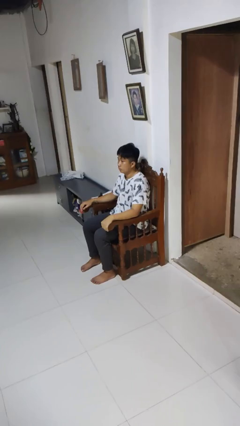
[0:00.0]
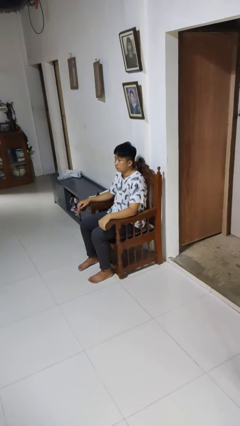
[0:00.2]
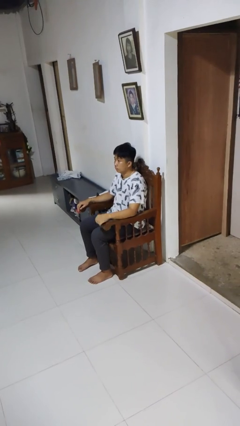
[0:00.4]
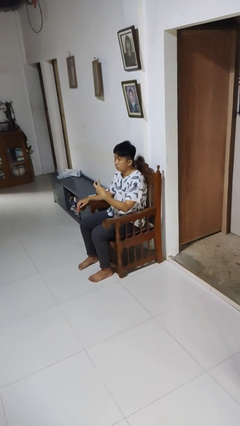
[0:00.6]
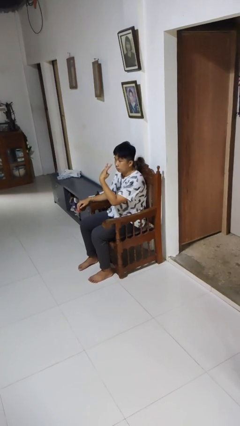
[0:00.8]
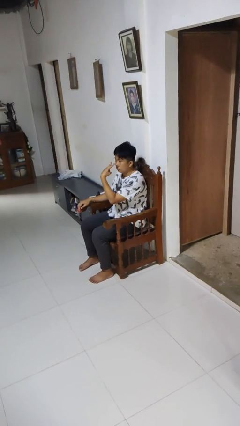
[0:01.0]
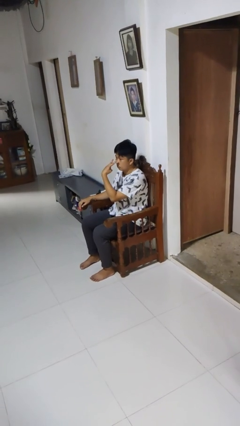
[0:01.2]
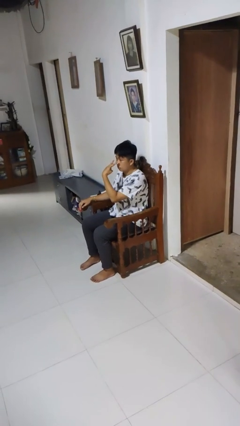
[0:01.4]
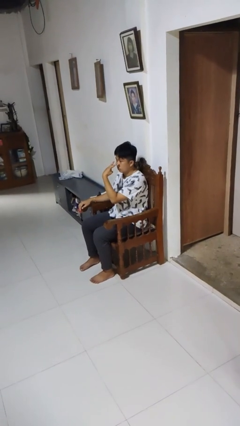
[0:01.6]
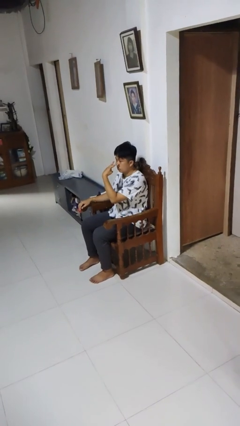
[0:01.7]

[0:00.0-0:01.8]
person gestures watch closely

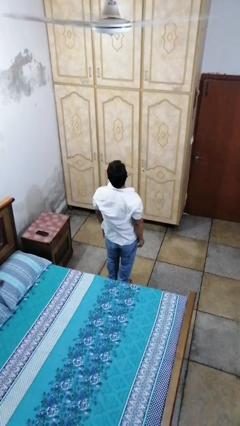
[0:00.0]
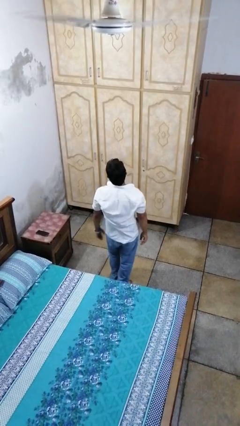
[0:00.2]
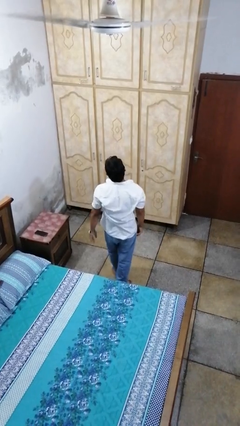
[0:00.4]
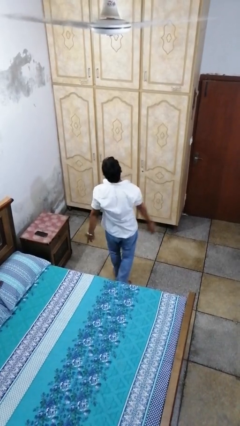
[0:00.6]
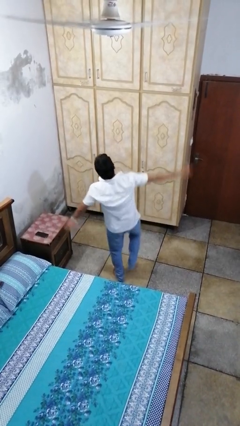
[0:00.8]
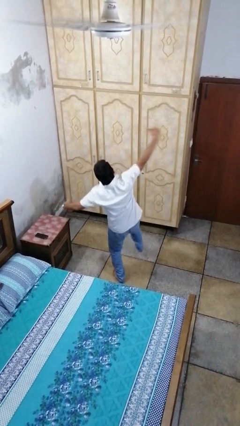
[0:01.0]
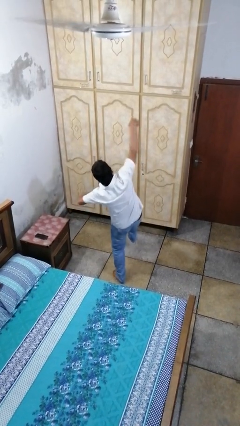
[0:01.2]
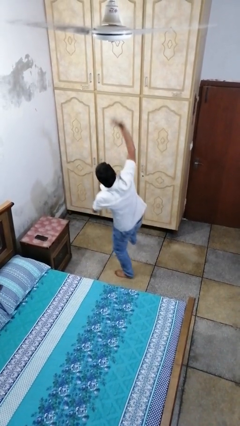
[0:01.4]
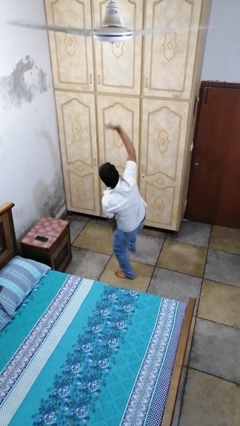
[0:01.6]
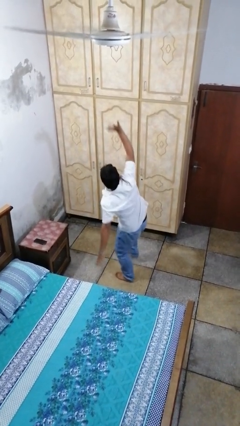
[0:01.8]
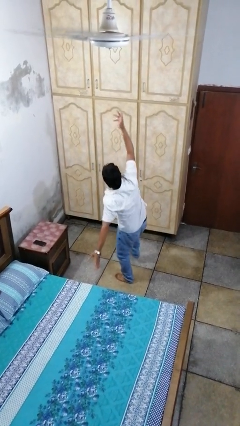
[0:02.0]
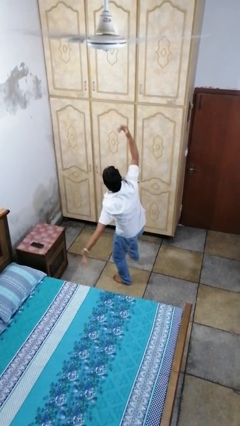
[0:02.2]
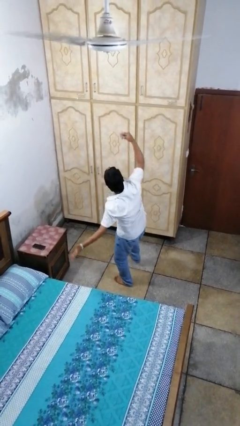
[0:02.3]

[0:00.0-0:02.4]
person dances in place

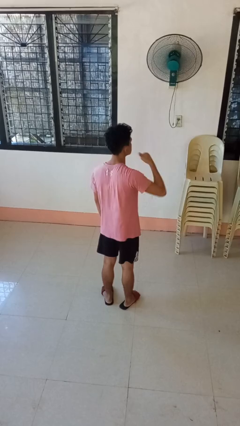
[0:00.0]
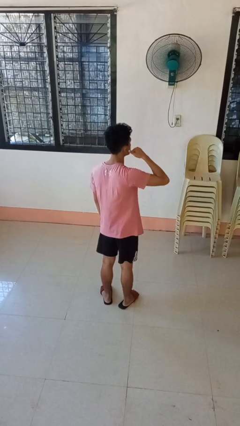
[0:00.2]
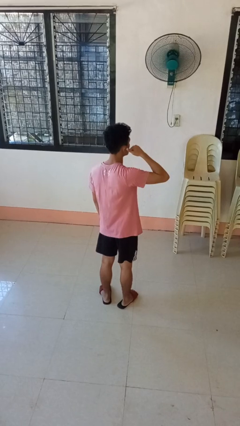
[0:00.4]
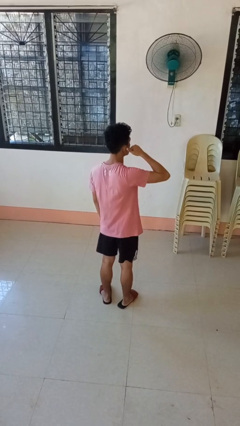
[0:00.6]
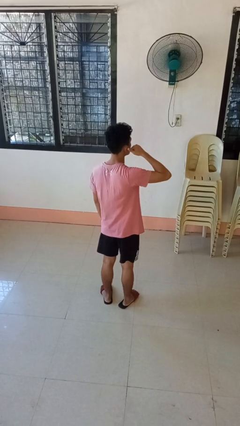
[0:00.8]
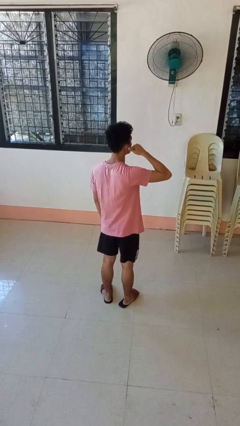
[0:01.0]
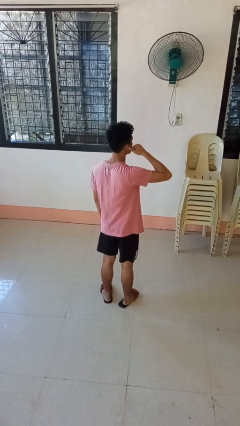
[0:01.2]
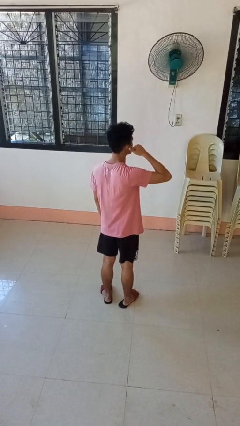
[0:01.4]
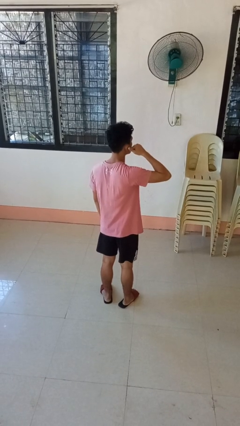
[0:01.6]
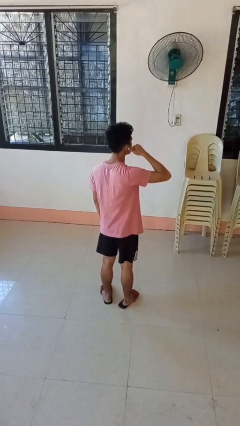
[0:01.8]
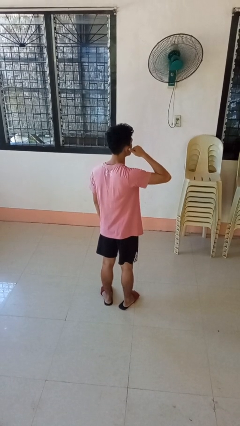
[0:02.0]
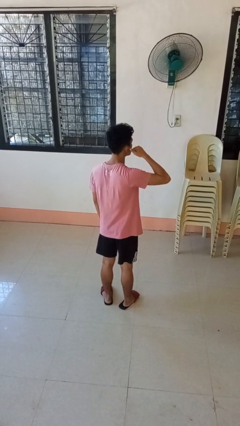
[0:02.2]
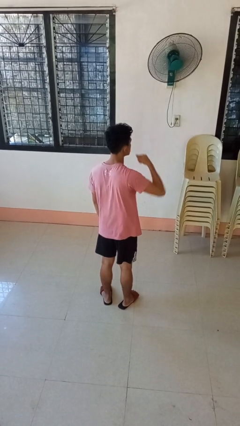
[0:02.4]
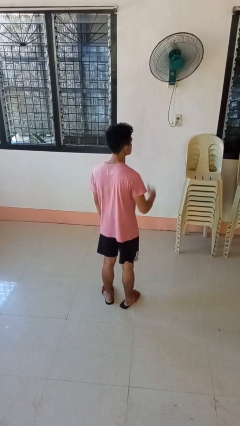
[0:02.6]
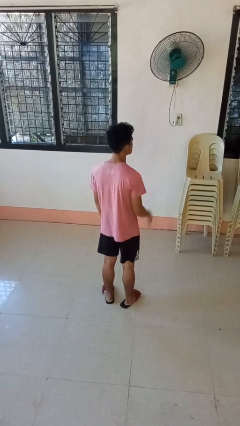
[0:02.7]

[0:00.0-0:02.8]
person gestures call me

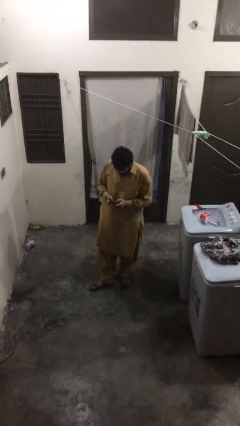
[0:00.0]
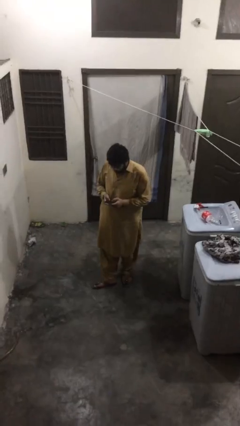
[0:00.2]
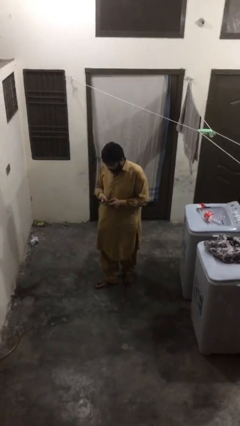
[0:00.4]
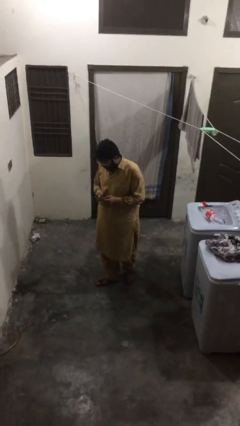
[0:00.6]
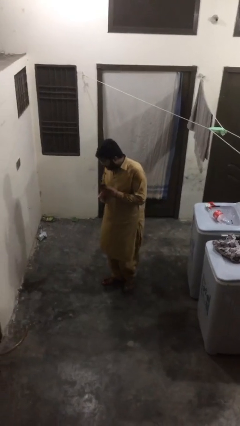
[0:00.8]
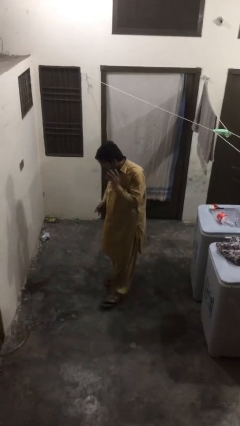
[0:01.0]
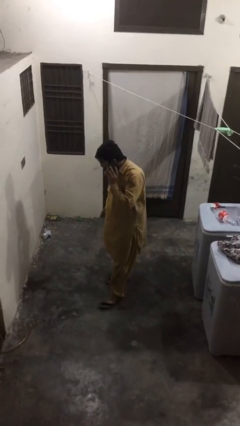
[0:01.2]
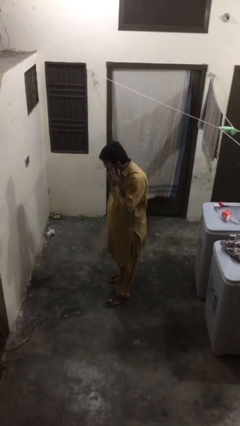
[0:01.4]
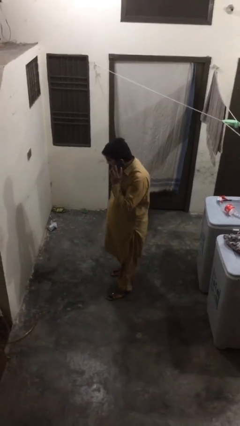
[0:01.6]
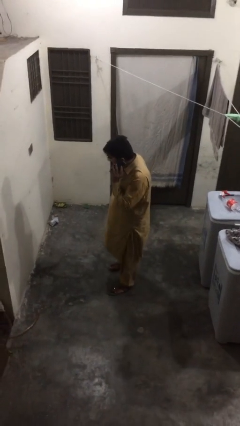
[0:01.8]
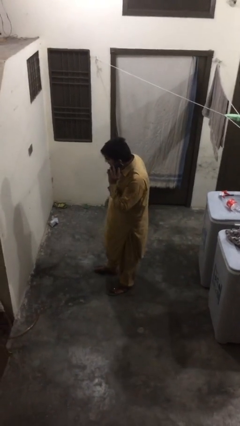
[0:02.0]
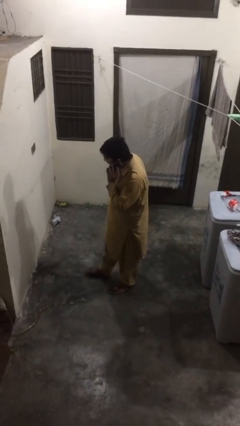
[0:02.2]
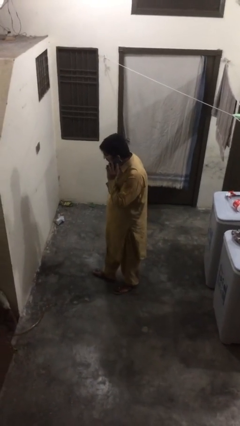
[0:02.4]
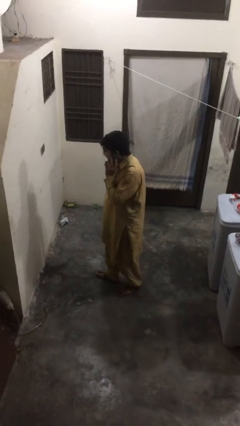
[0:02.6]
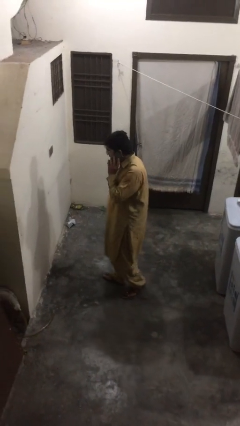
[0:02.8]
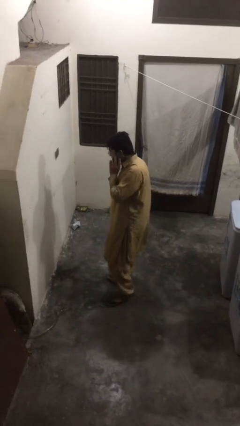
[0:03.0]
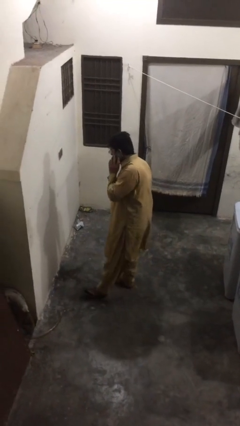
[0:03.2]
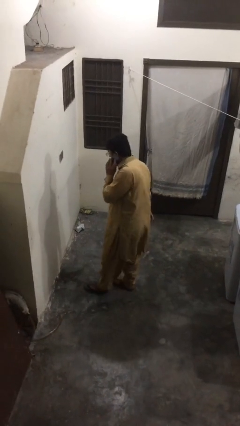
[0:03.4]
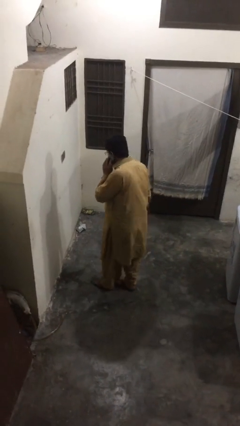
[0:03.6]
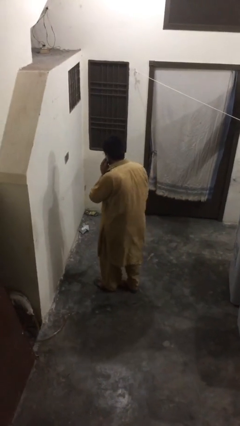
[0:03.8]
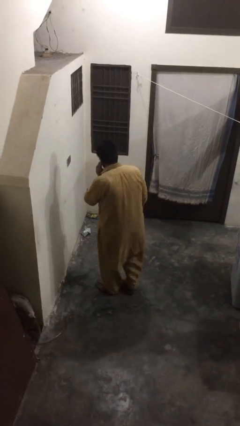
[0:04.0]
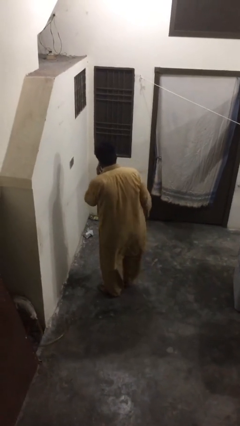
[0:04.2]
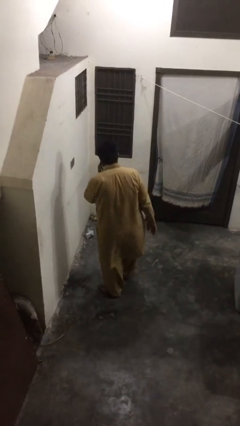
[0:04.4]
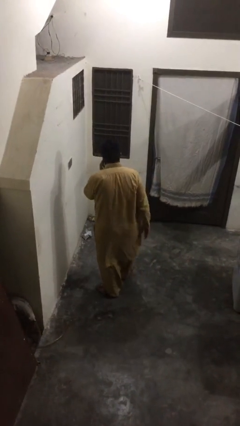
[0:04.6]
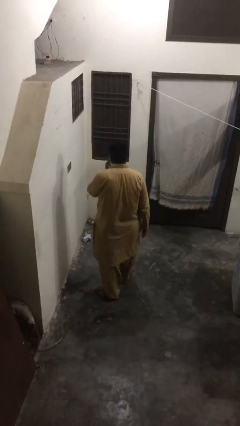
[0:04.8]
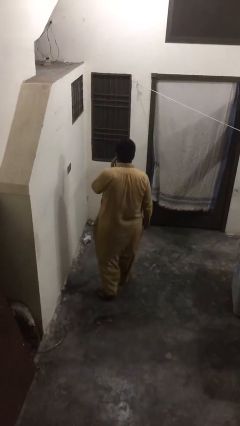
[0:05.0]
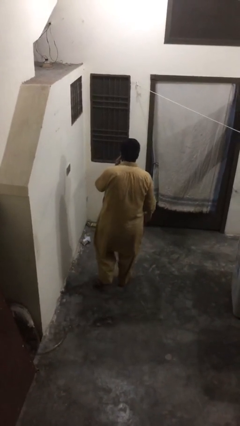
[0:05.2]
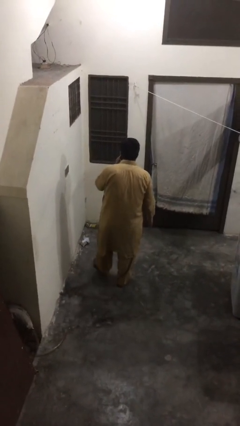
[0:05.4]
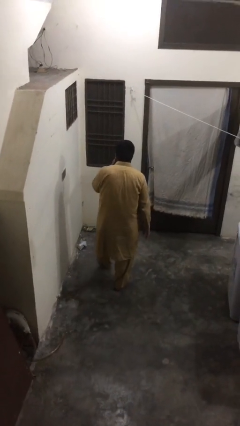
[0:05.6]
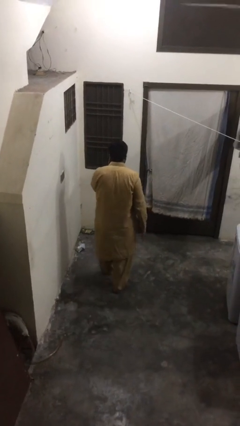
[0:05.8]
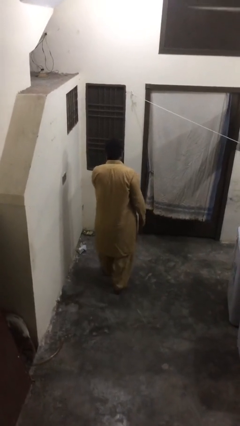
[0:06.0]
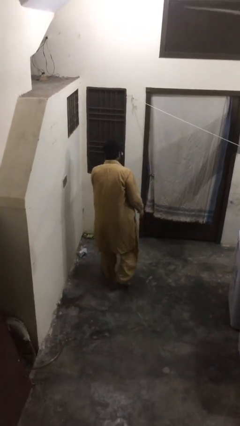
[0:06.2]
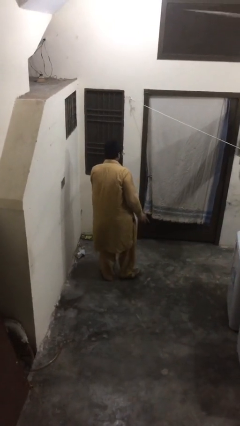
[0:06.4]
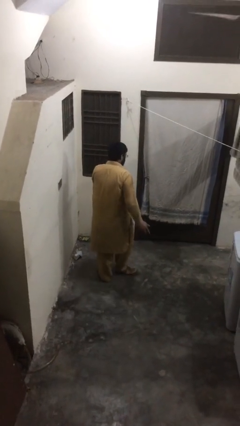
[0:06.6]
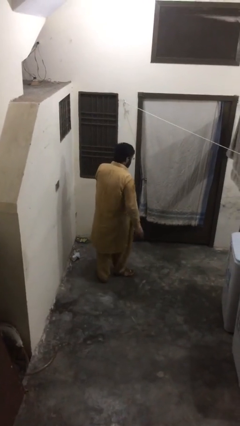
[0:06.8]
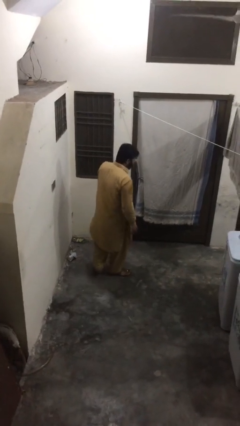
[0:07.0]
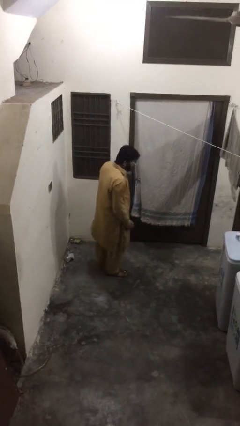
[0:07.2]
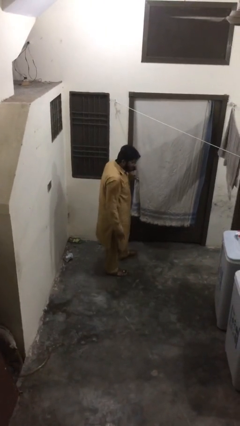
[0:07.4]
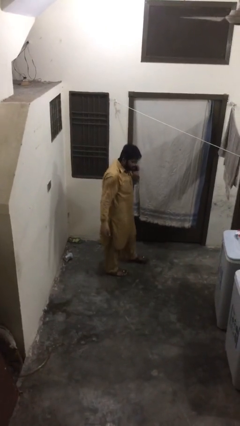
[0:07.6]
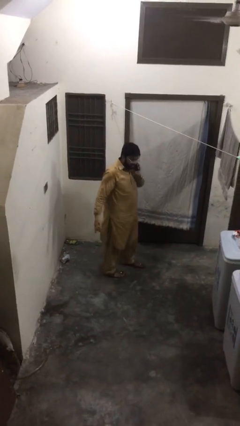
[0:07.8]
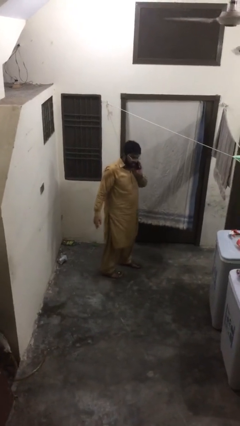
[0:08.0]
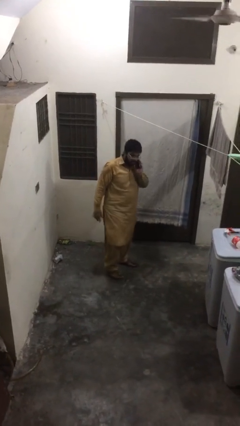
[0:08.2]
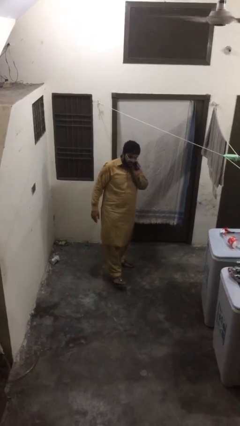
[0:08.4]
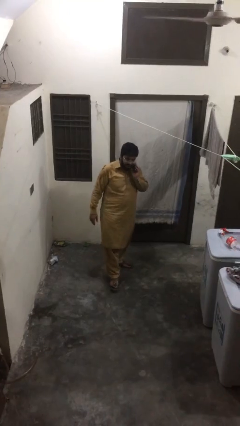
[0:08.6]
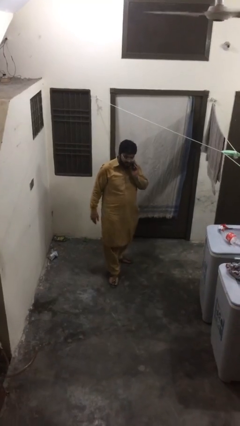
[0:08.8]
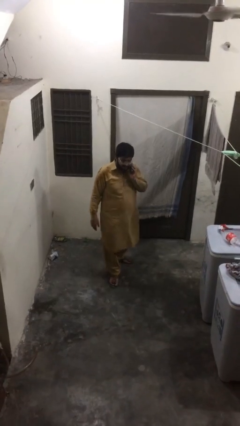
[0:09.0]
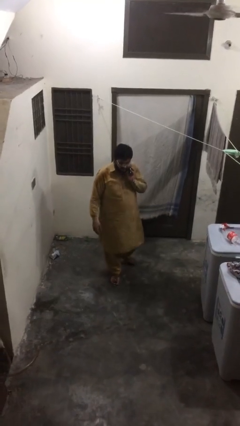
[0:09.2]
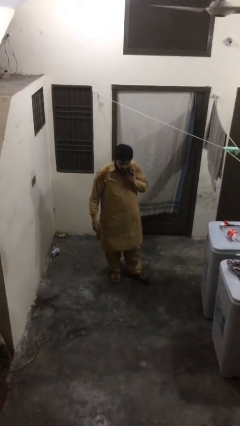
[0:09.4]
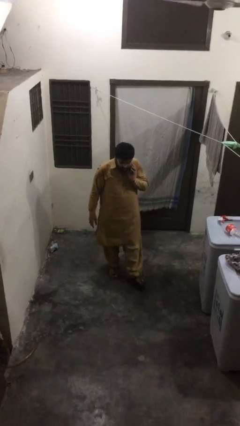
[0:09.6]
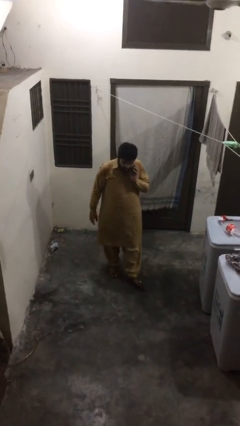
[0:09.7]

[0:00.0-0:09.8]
person talks on phone

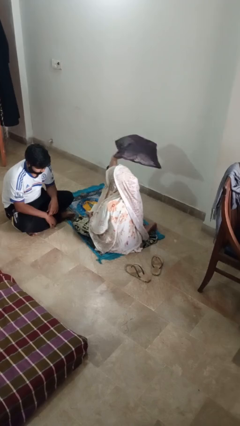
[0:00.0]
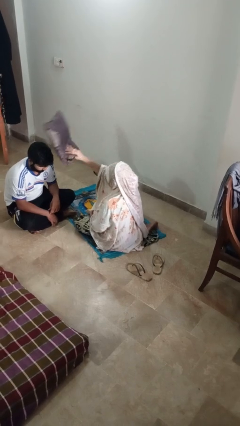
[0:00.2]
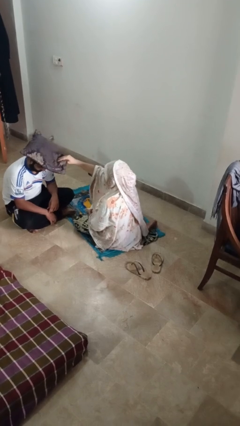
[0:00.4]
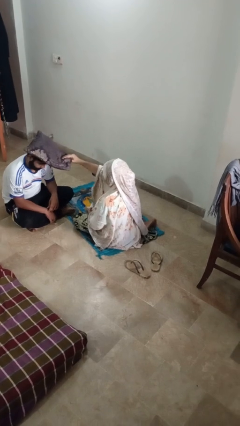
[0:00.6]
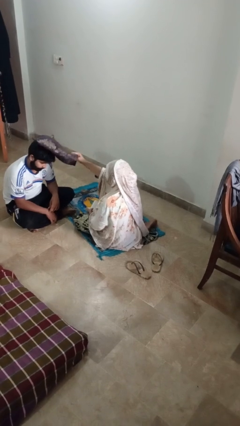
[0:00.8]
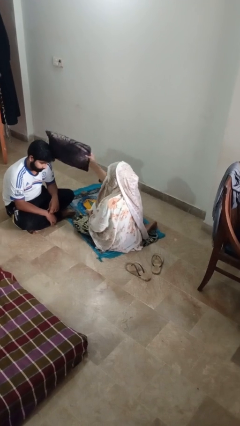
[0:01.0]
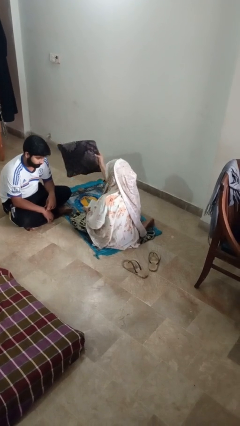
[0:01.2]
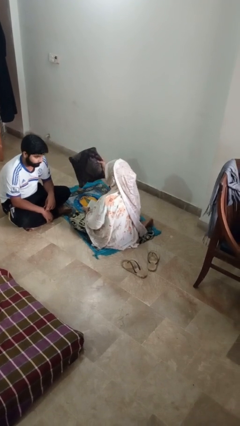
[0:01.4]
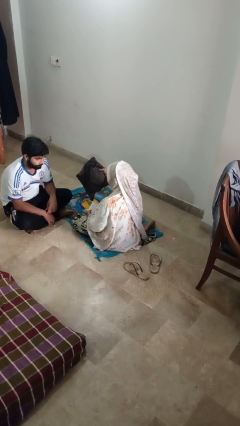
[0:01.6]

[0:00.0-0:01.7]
person hits person with pillow
